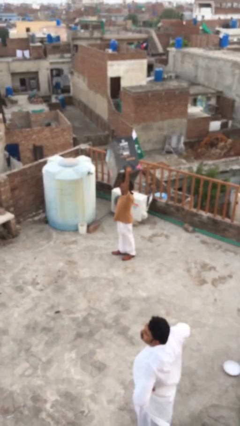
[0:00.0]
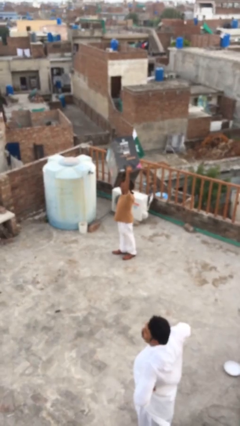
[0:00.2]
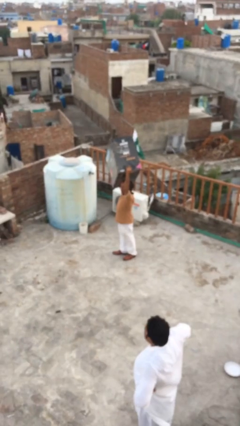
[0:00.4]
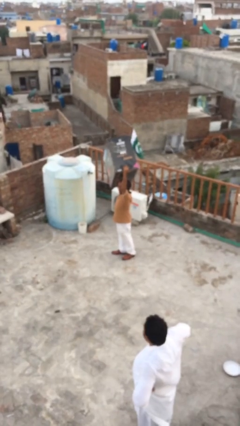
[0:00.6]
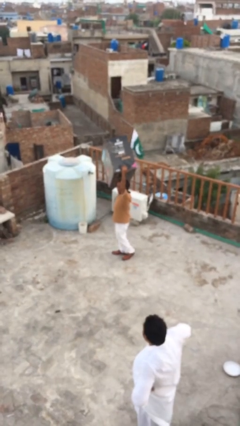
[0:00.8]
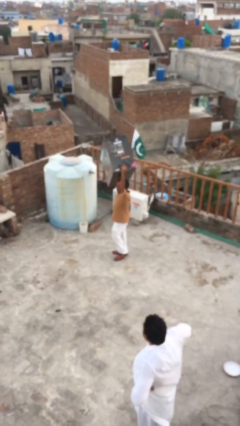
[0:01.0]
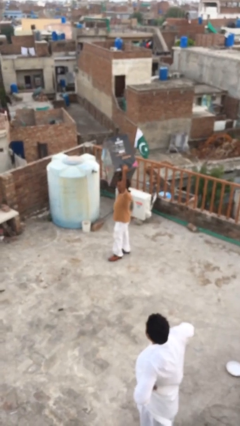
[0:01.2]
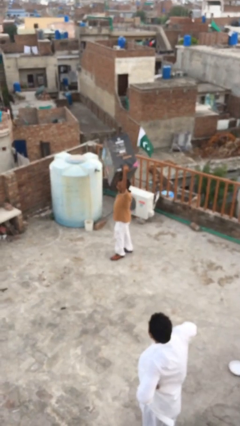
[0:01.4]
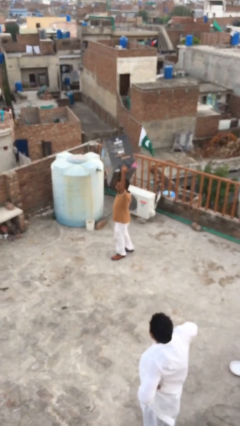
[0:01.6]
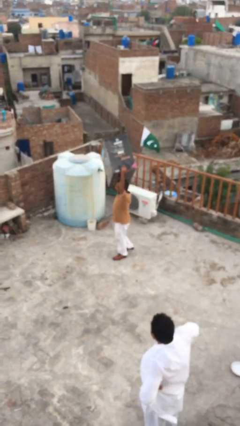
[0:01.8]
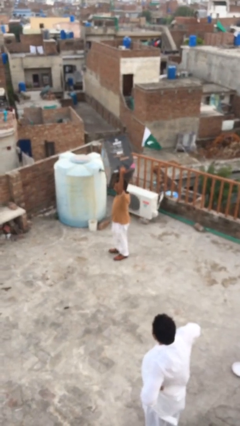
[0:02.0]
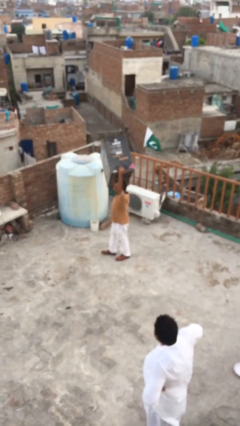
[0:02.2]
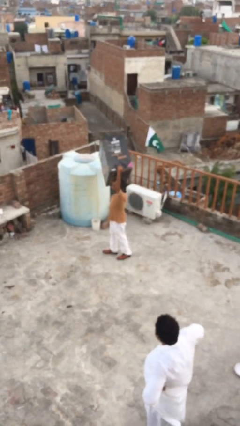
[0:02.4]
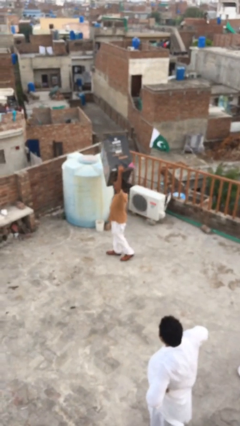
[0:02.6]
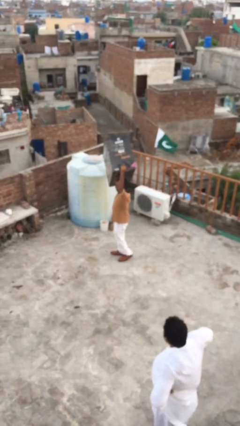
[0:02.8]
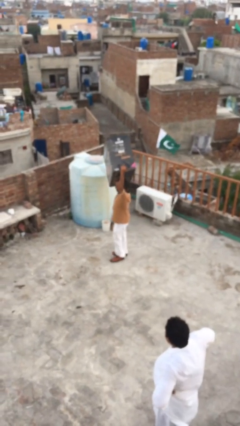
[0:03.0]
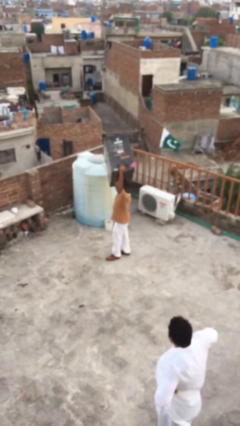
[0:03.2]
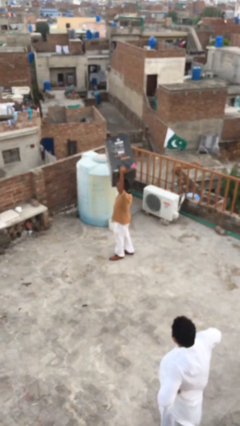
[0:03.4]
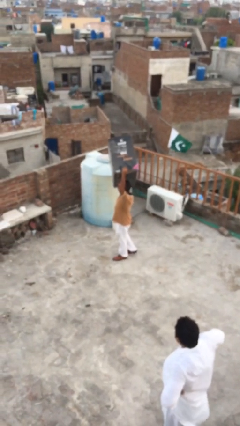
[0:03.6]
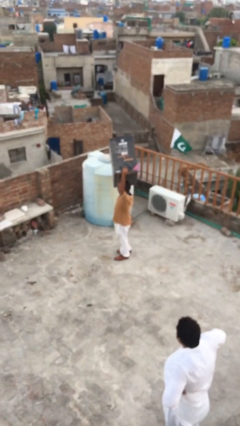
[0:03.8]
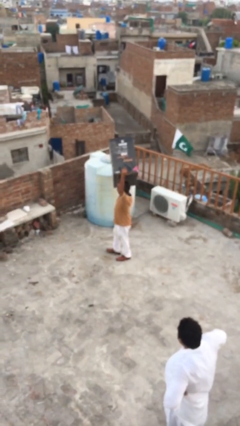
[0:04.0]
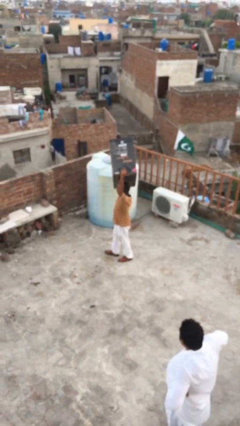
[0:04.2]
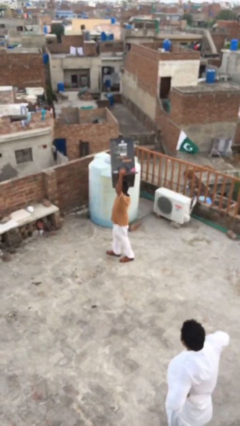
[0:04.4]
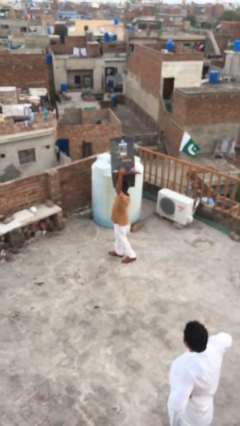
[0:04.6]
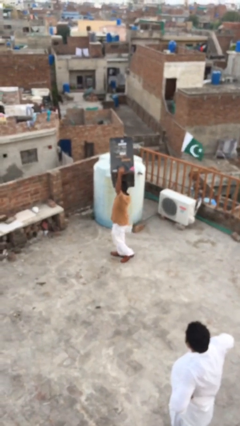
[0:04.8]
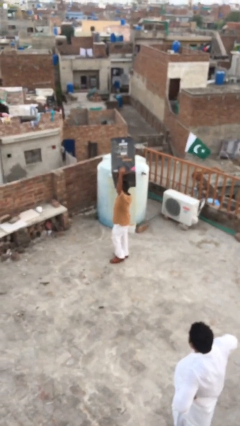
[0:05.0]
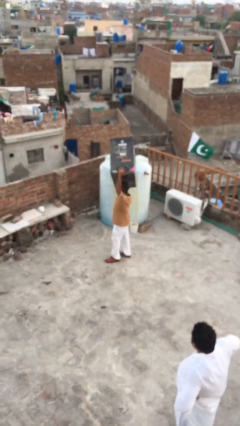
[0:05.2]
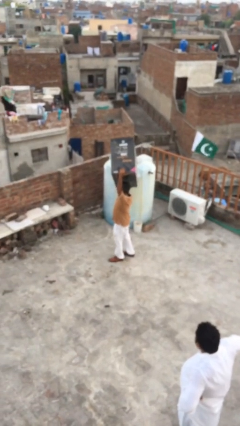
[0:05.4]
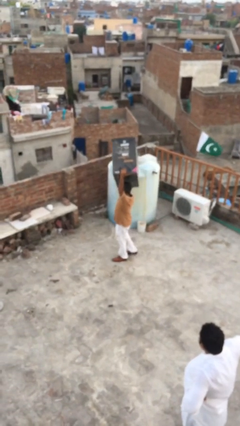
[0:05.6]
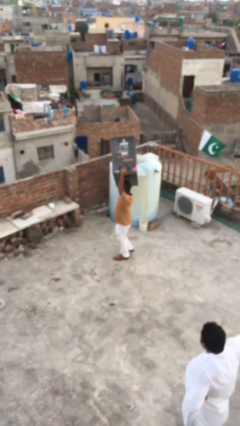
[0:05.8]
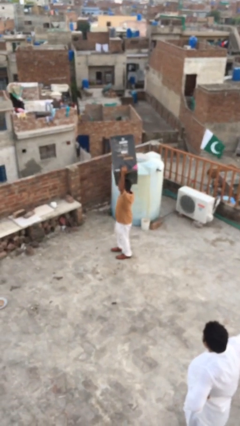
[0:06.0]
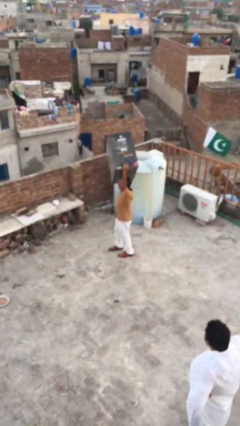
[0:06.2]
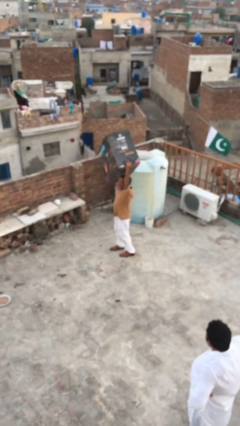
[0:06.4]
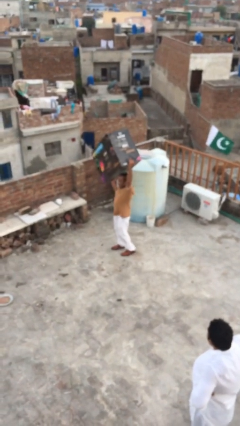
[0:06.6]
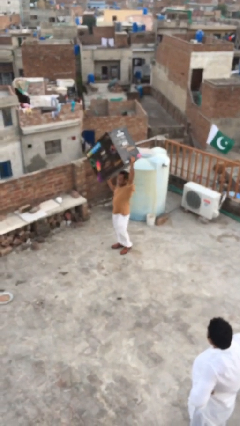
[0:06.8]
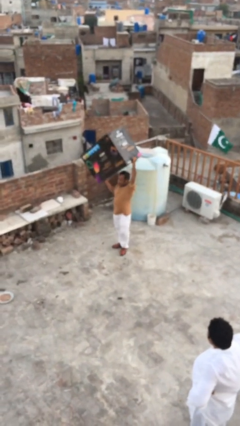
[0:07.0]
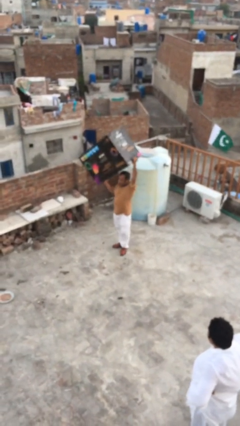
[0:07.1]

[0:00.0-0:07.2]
person carries heavy object

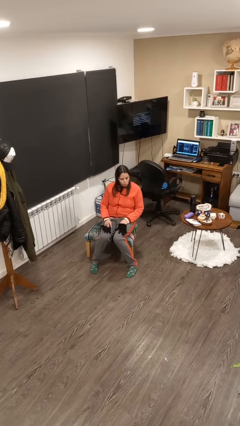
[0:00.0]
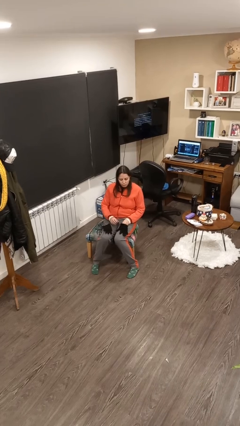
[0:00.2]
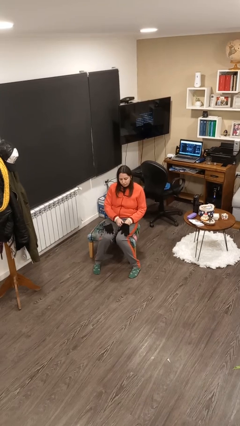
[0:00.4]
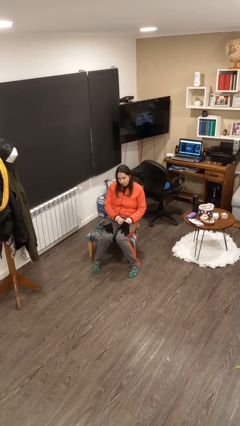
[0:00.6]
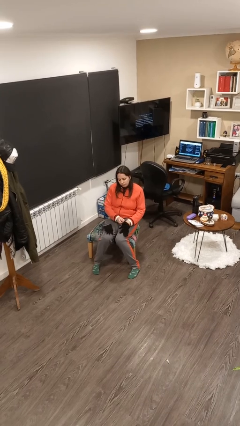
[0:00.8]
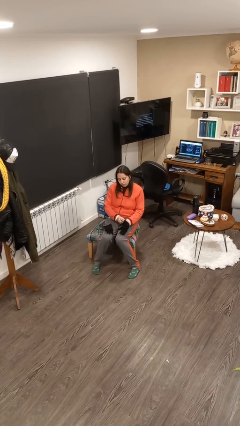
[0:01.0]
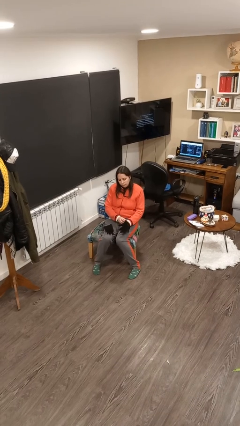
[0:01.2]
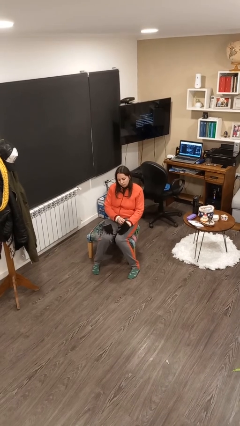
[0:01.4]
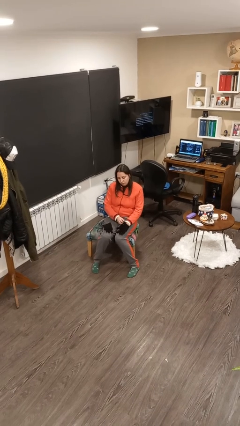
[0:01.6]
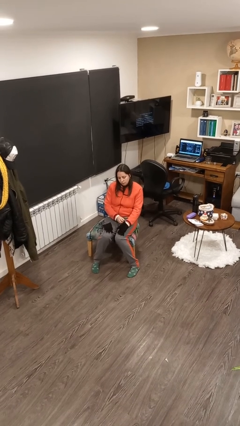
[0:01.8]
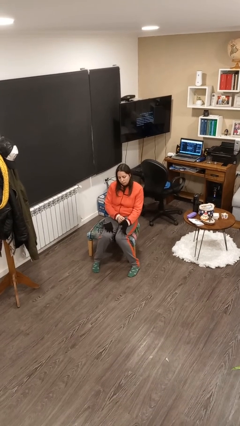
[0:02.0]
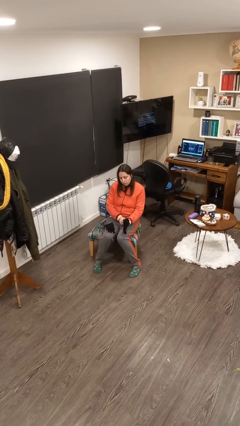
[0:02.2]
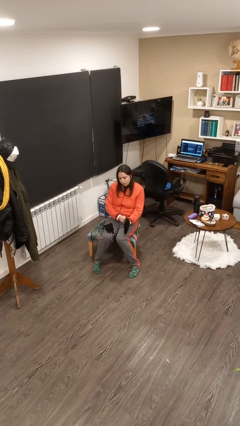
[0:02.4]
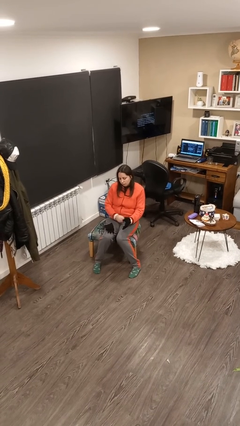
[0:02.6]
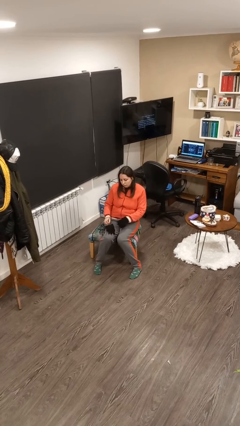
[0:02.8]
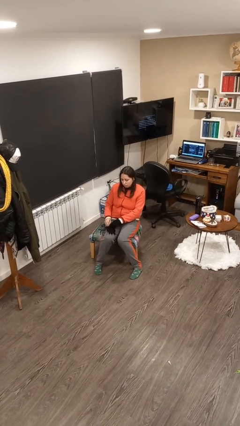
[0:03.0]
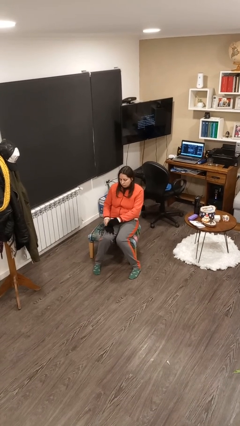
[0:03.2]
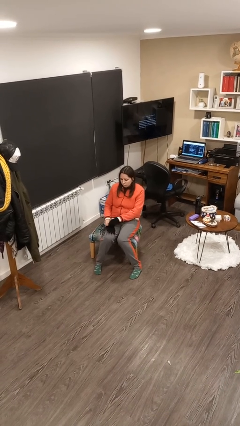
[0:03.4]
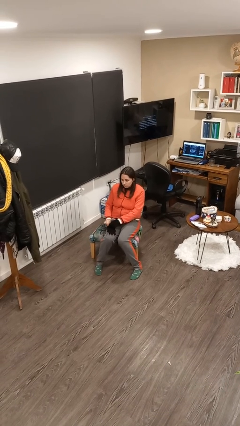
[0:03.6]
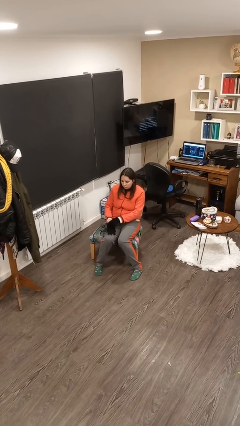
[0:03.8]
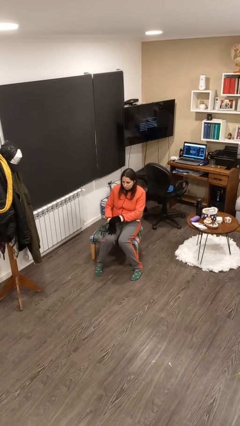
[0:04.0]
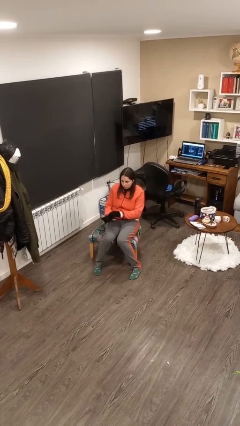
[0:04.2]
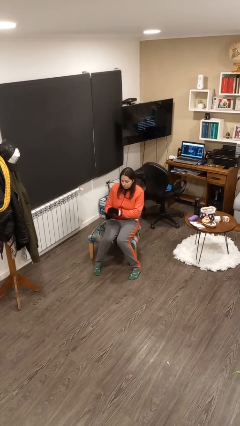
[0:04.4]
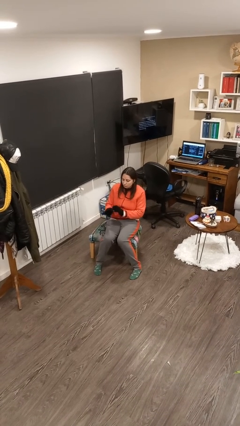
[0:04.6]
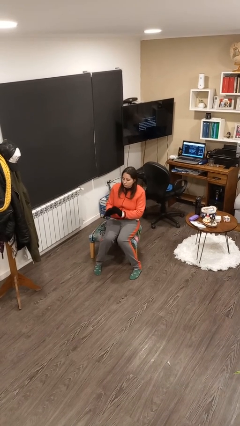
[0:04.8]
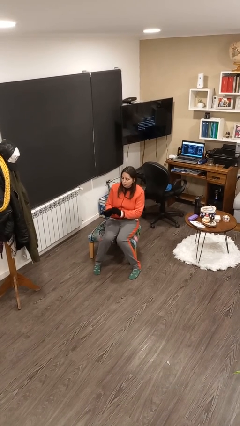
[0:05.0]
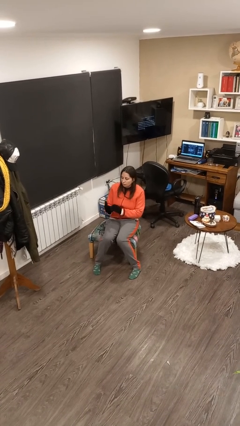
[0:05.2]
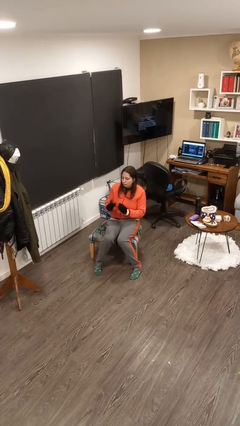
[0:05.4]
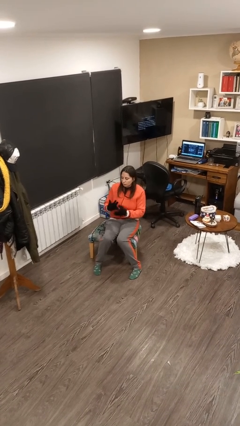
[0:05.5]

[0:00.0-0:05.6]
person puts on gloves

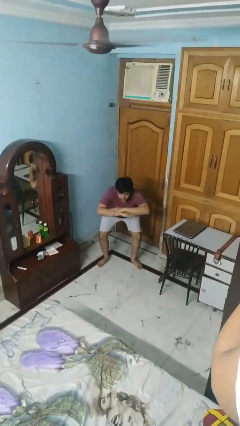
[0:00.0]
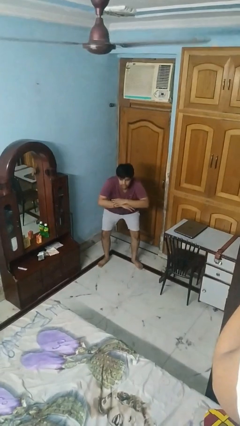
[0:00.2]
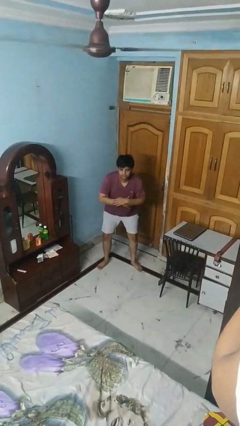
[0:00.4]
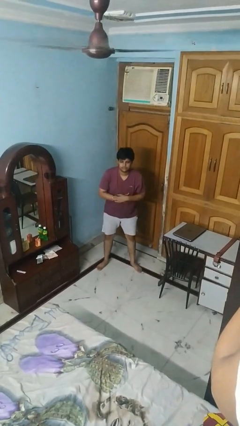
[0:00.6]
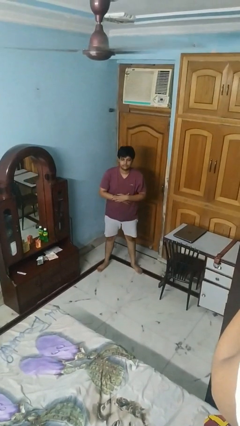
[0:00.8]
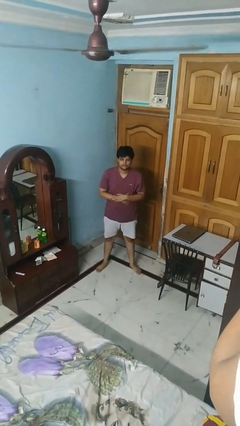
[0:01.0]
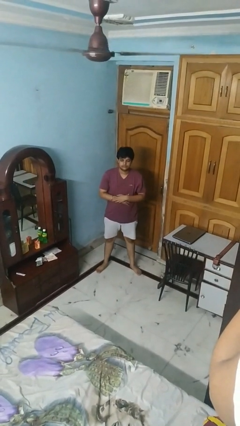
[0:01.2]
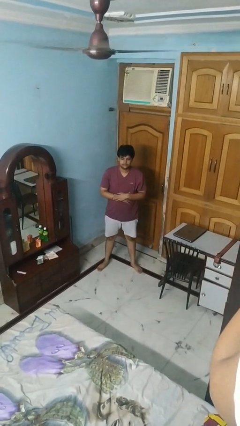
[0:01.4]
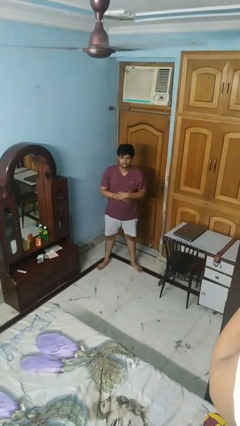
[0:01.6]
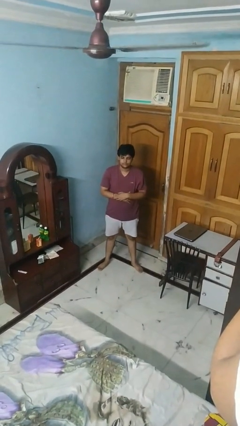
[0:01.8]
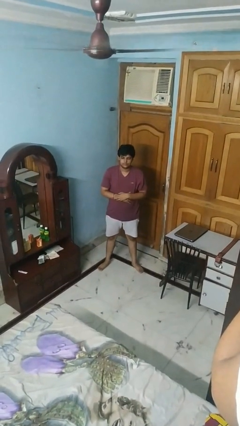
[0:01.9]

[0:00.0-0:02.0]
person stands up

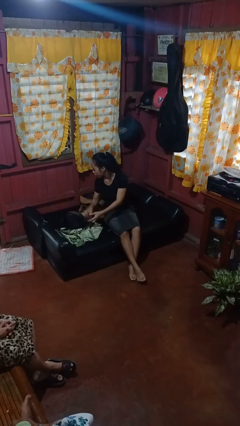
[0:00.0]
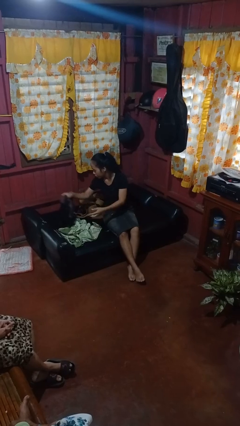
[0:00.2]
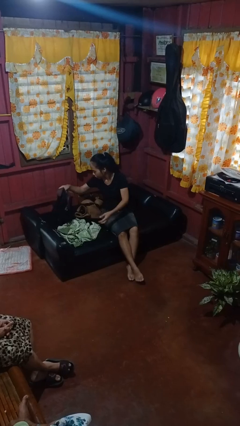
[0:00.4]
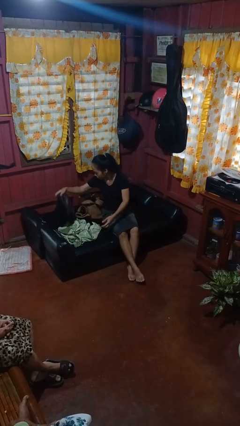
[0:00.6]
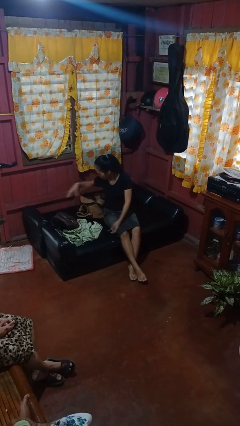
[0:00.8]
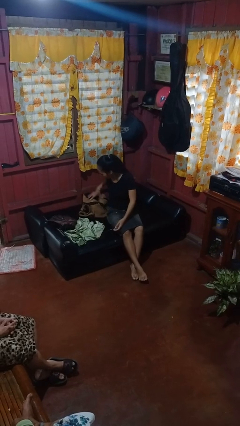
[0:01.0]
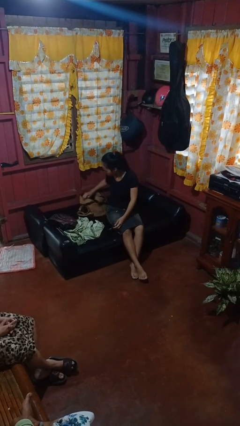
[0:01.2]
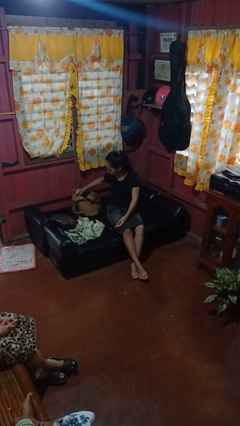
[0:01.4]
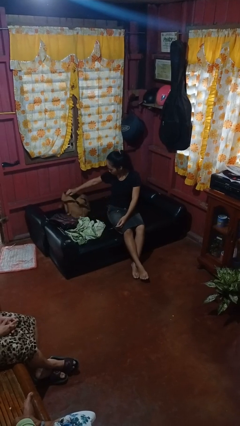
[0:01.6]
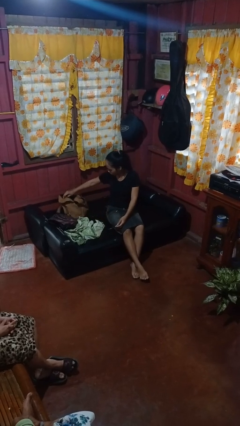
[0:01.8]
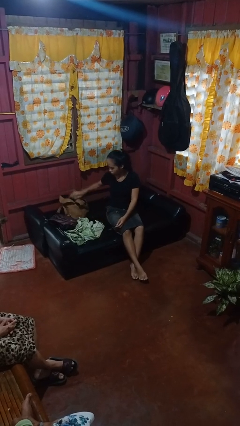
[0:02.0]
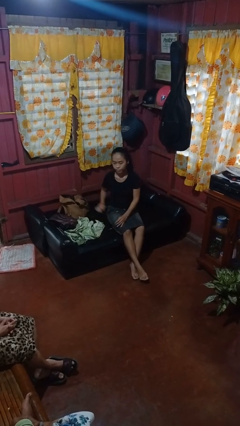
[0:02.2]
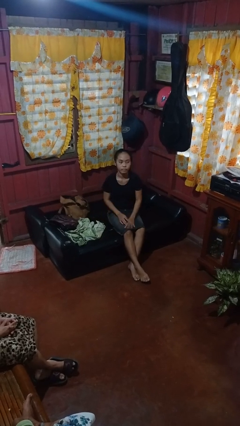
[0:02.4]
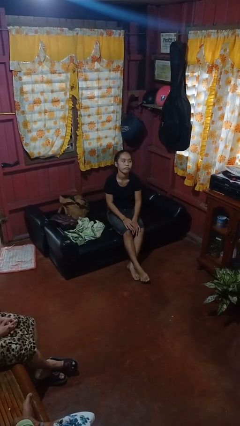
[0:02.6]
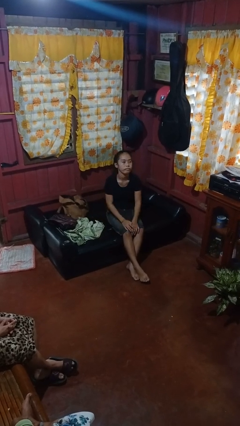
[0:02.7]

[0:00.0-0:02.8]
person searches in couch

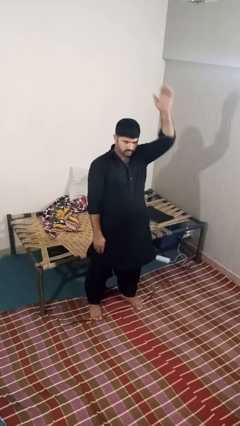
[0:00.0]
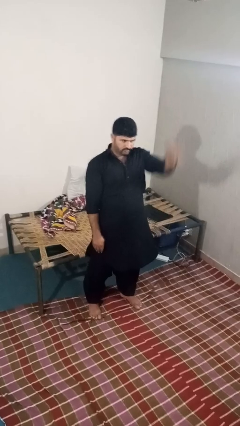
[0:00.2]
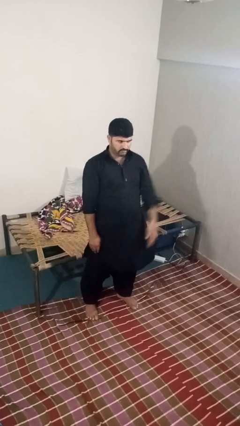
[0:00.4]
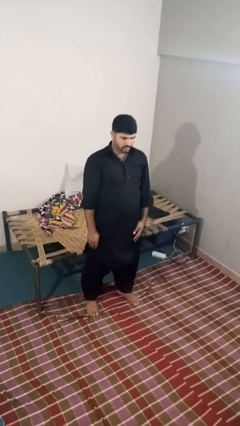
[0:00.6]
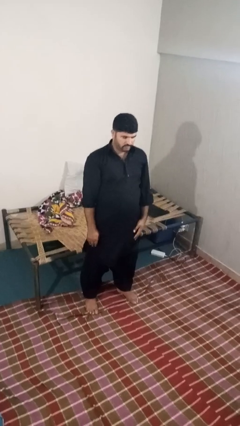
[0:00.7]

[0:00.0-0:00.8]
person gestures swipe down
